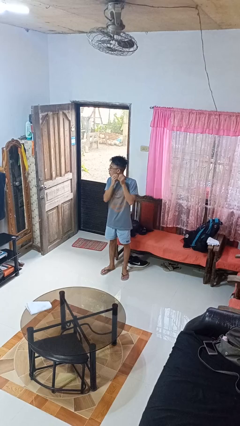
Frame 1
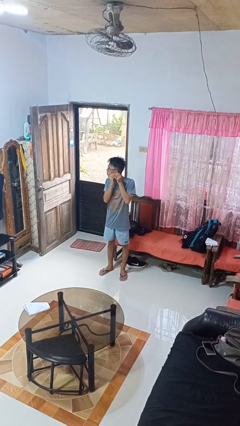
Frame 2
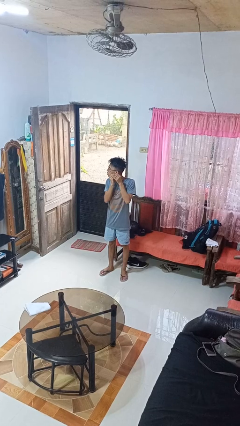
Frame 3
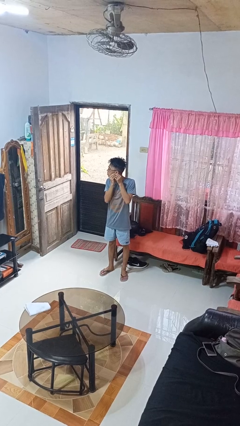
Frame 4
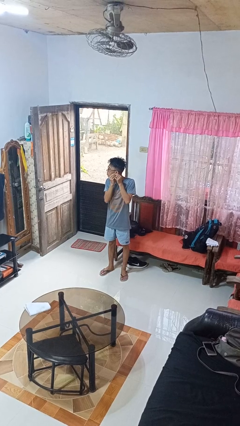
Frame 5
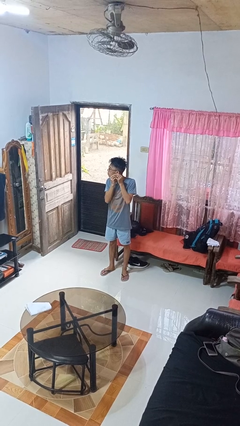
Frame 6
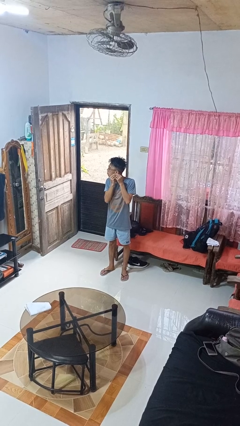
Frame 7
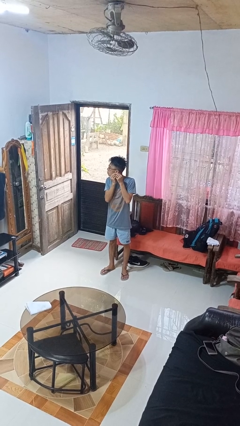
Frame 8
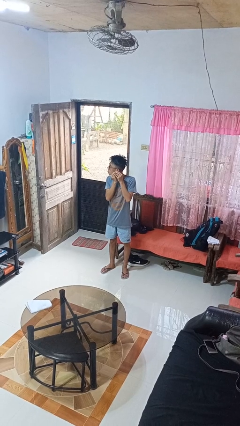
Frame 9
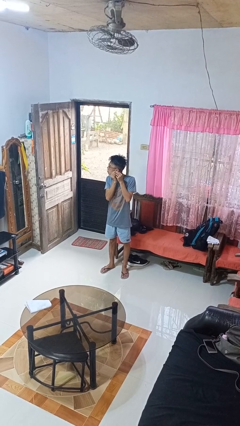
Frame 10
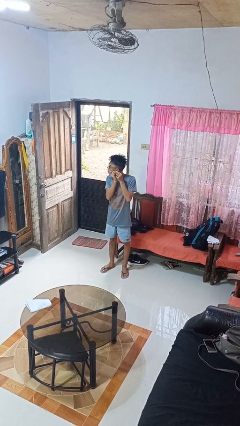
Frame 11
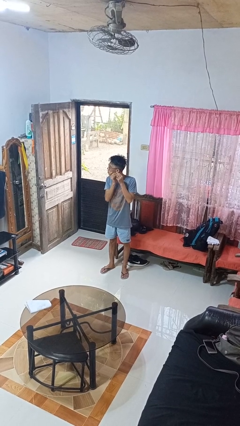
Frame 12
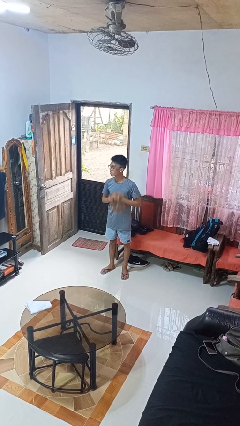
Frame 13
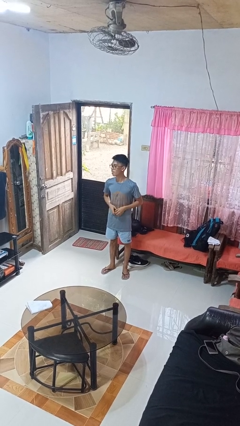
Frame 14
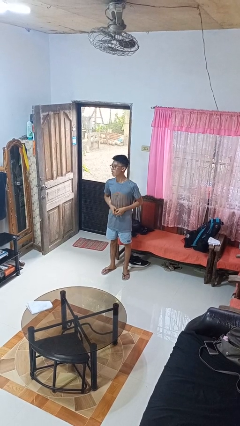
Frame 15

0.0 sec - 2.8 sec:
person puts on earrings

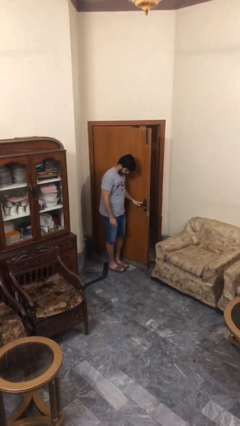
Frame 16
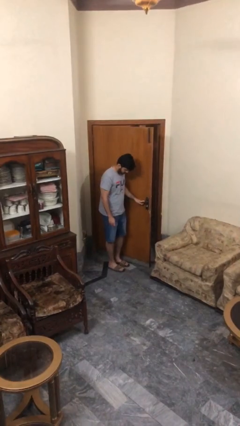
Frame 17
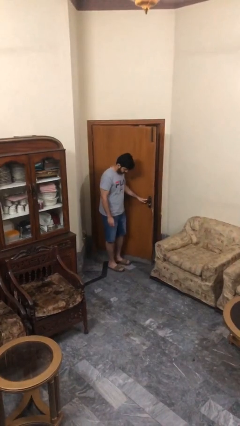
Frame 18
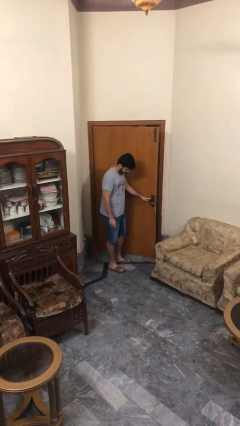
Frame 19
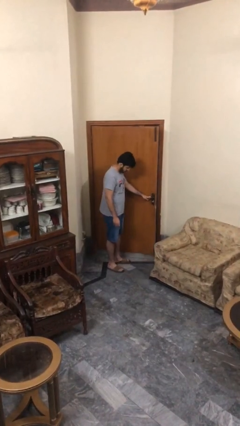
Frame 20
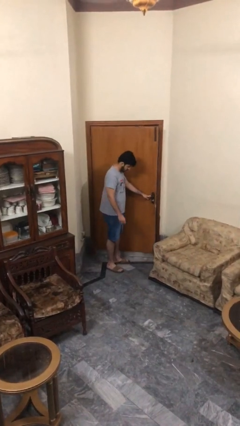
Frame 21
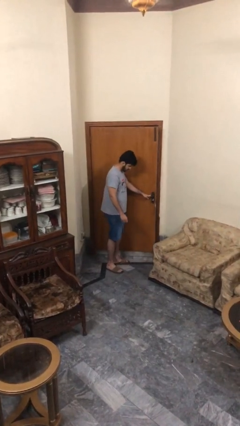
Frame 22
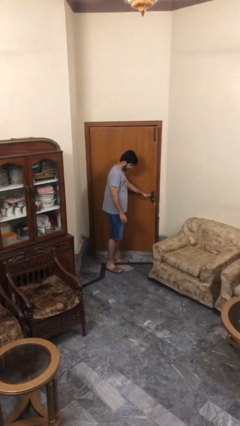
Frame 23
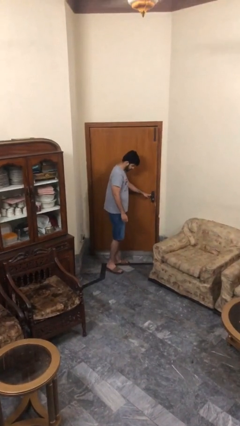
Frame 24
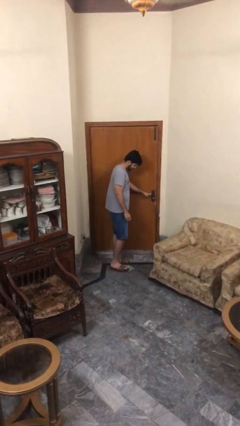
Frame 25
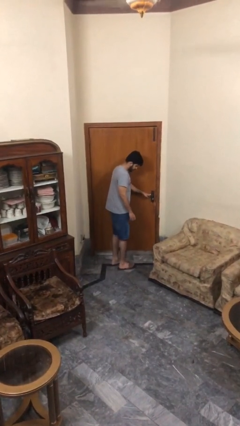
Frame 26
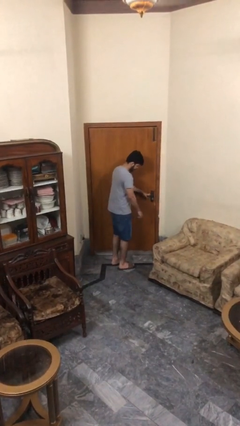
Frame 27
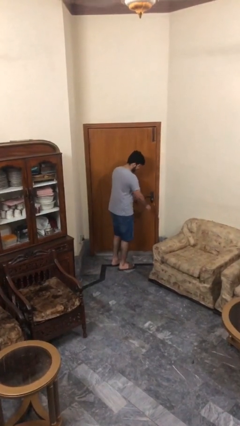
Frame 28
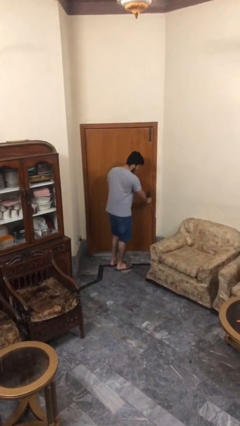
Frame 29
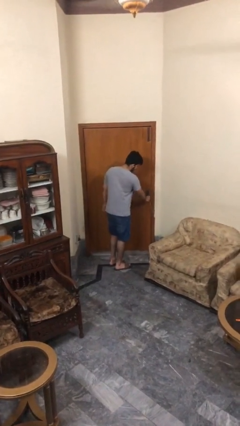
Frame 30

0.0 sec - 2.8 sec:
person closes facility door

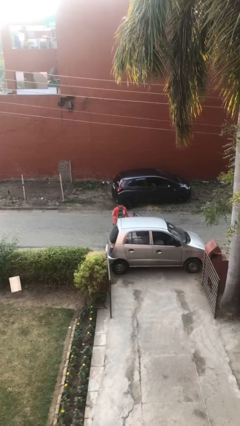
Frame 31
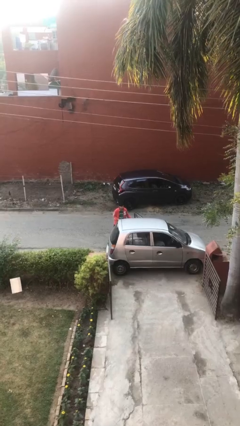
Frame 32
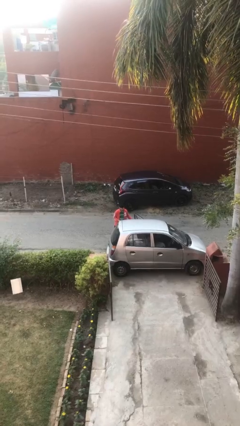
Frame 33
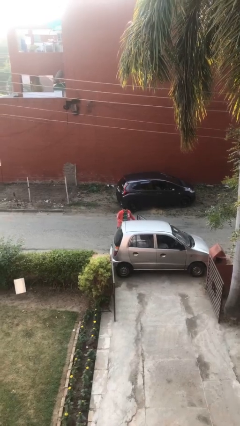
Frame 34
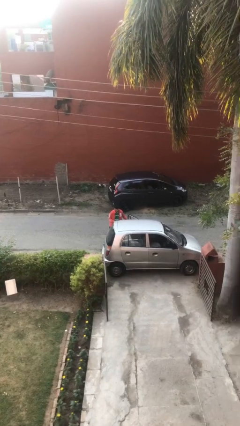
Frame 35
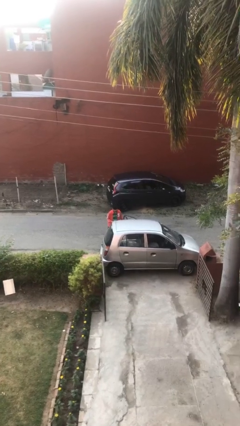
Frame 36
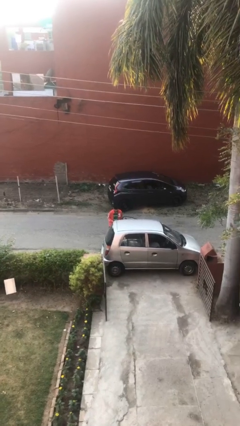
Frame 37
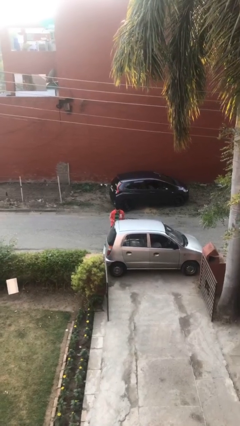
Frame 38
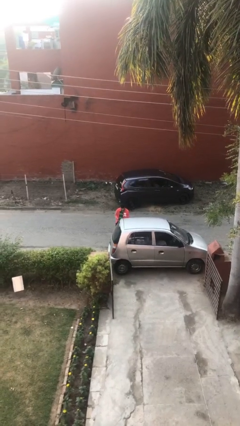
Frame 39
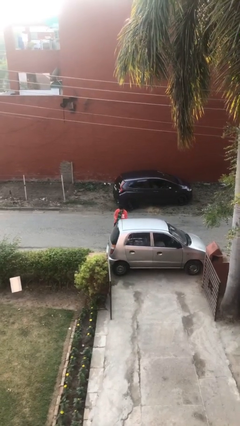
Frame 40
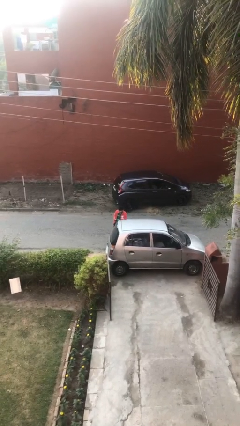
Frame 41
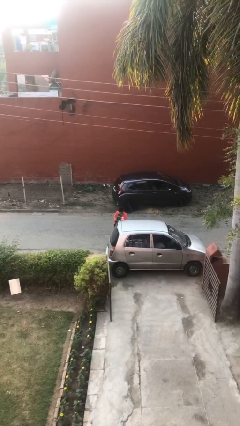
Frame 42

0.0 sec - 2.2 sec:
person closes car door

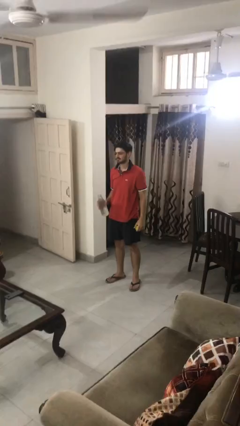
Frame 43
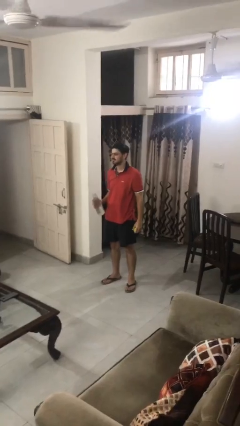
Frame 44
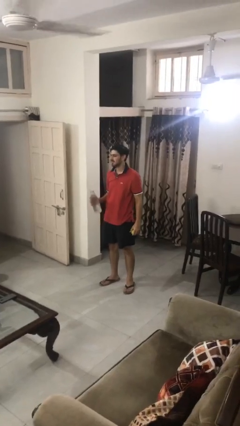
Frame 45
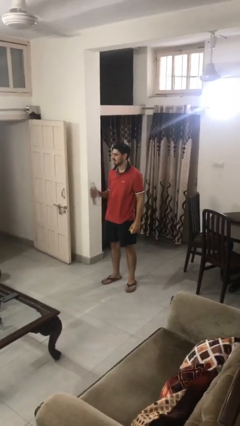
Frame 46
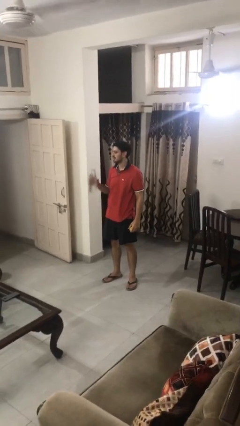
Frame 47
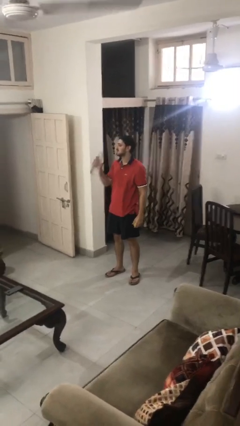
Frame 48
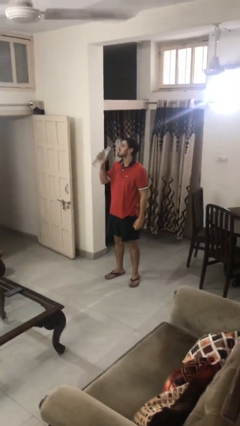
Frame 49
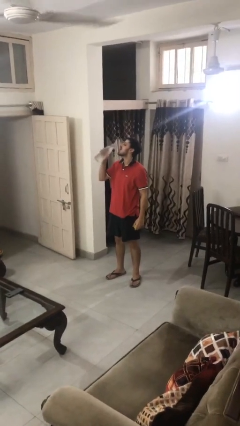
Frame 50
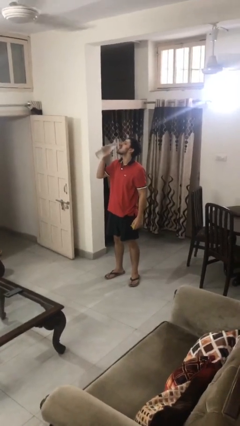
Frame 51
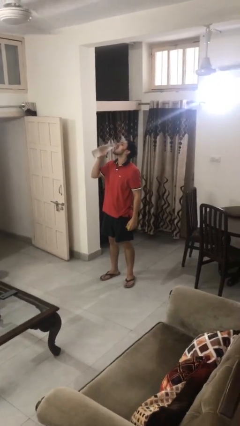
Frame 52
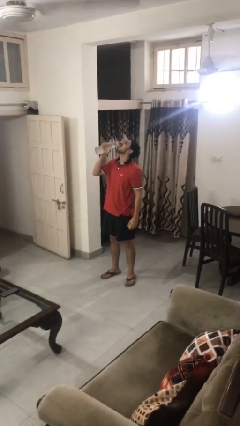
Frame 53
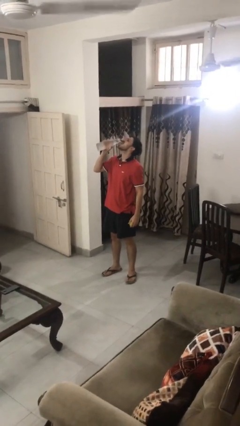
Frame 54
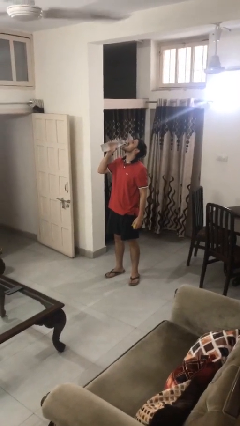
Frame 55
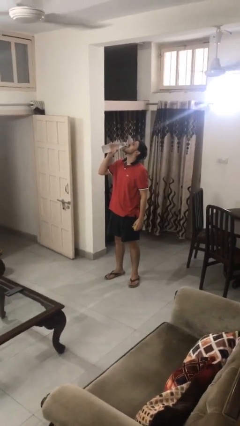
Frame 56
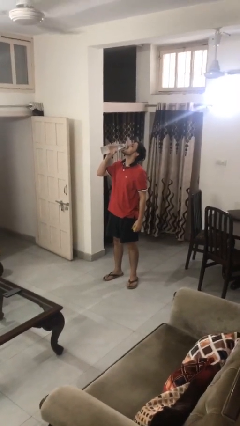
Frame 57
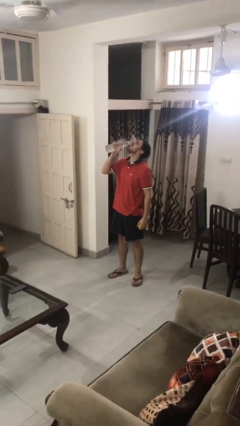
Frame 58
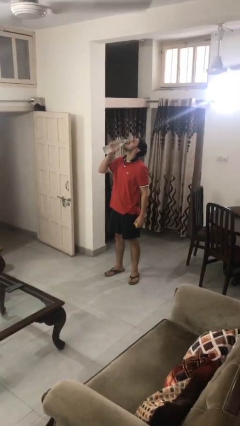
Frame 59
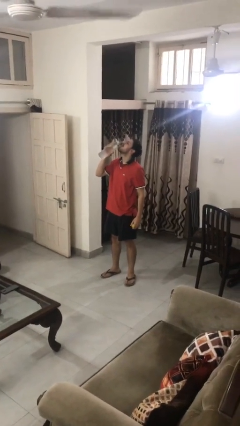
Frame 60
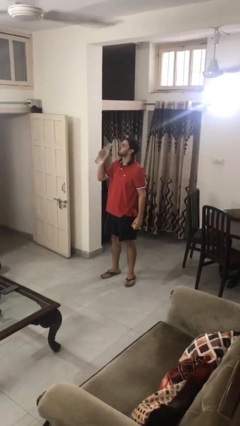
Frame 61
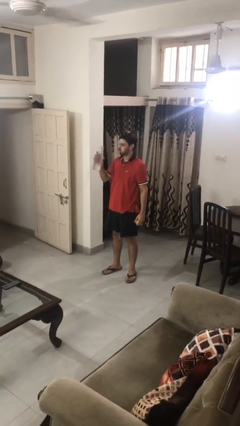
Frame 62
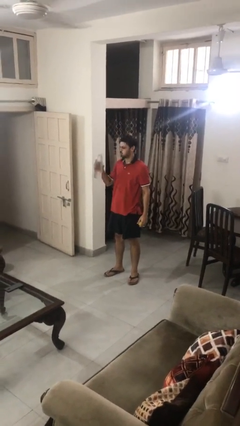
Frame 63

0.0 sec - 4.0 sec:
person drinks from bottle

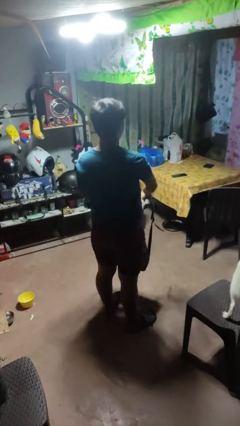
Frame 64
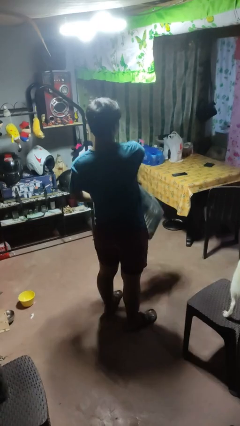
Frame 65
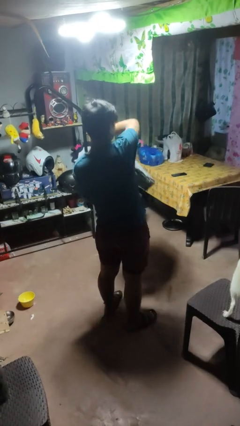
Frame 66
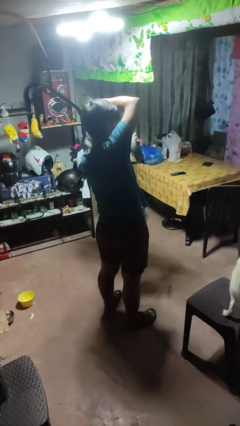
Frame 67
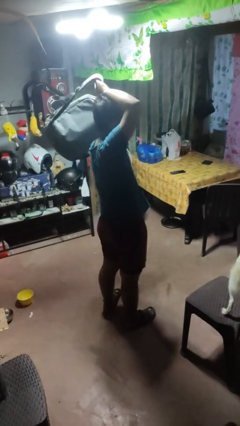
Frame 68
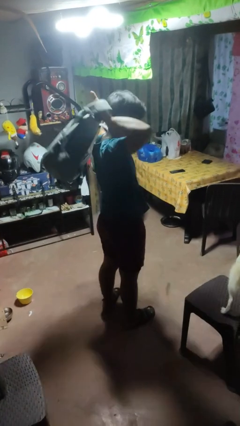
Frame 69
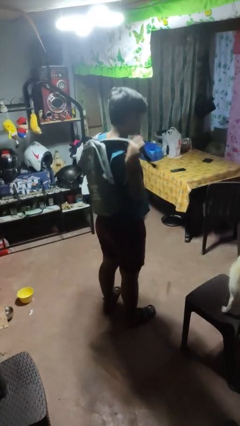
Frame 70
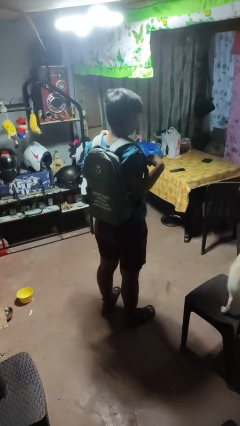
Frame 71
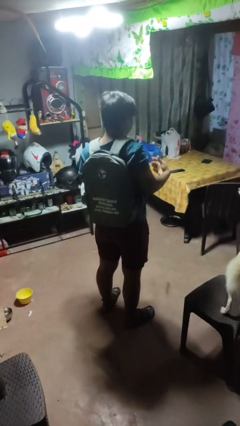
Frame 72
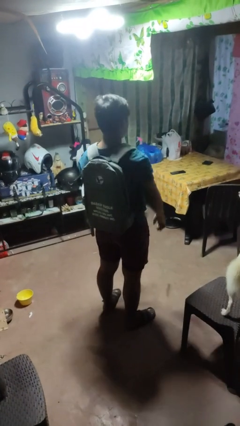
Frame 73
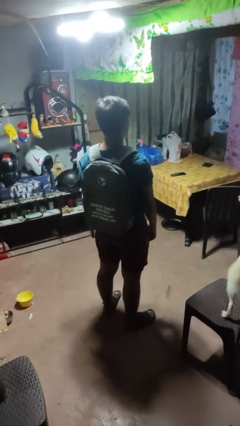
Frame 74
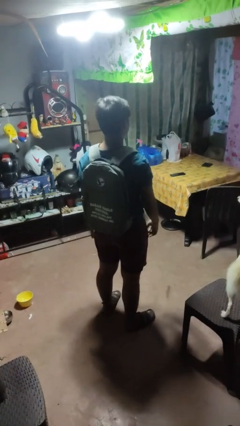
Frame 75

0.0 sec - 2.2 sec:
person puts on backpack

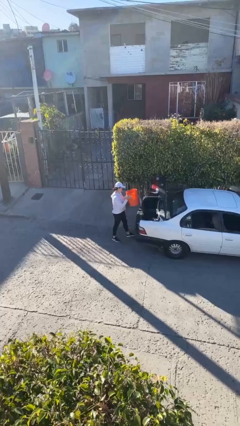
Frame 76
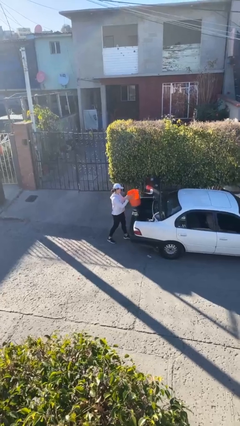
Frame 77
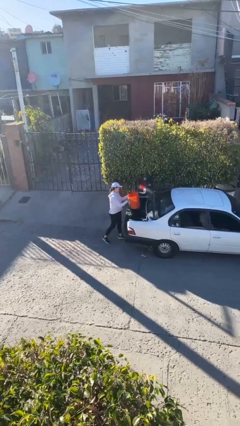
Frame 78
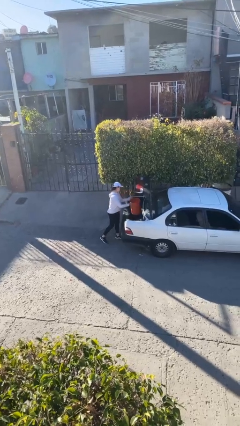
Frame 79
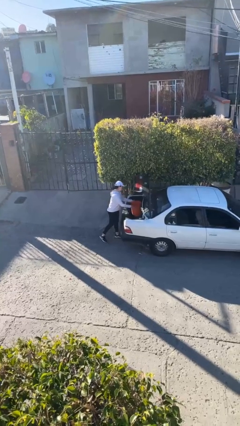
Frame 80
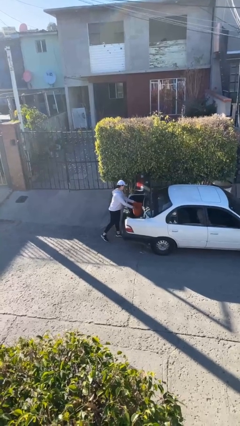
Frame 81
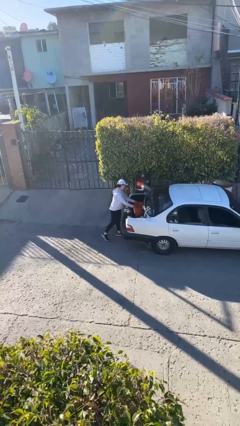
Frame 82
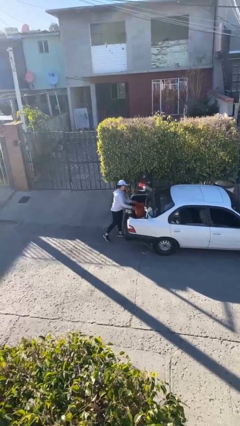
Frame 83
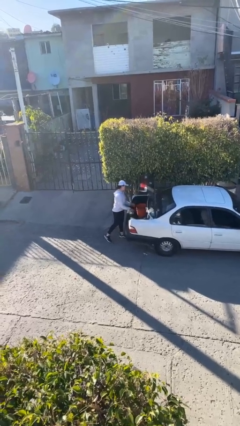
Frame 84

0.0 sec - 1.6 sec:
person loads car

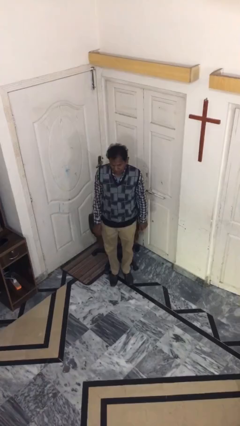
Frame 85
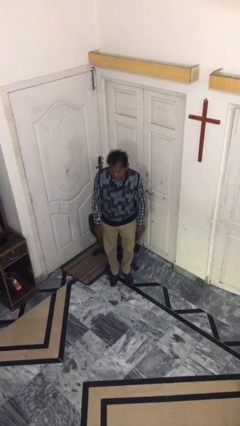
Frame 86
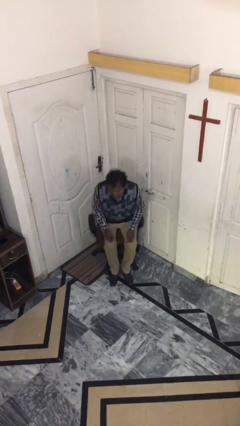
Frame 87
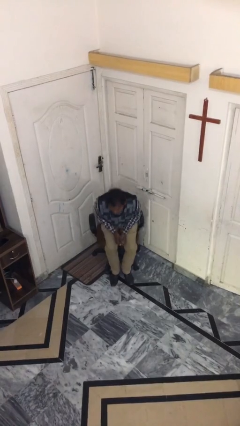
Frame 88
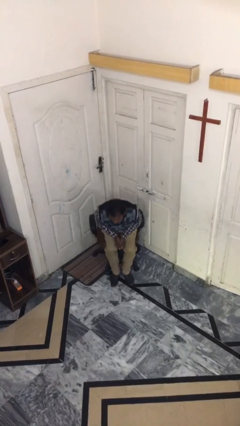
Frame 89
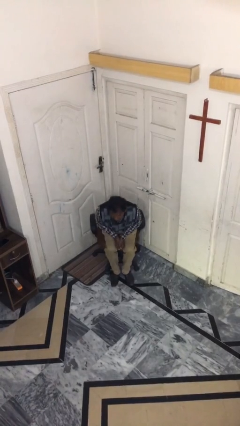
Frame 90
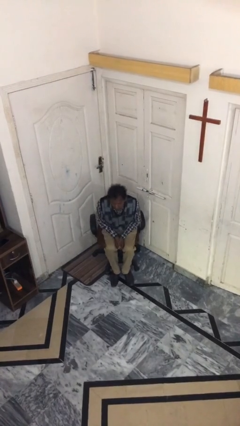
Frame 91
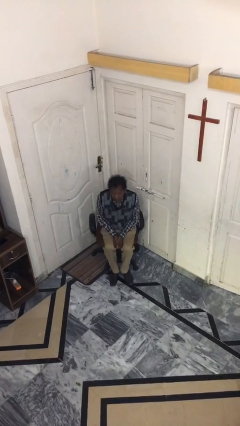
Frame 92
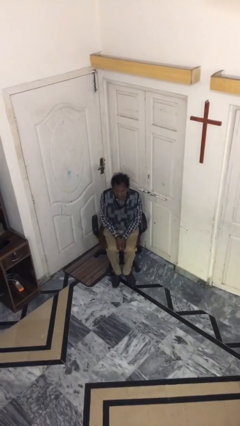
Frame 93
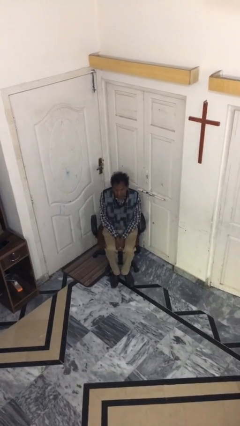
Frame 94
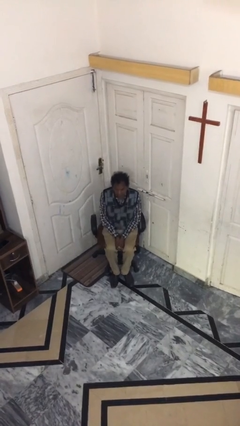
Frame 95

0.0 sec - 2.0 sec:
person sits down
